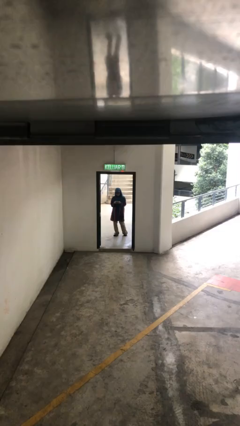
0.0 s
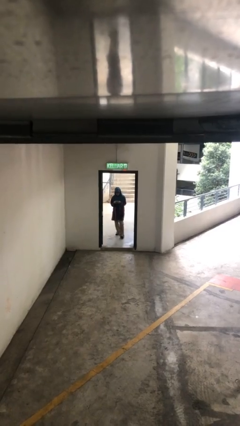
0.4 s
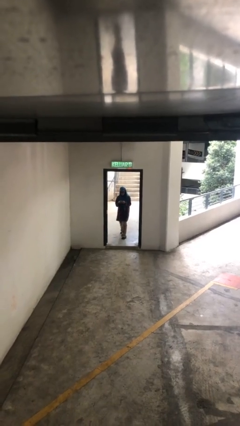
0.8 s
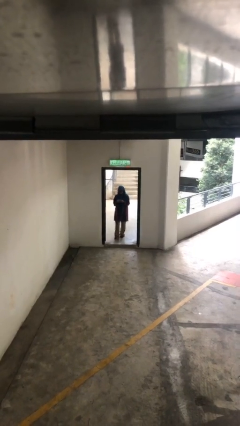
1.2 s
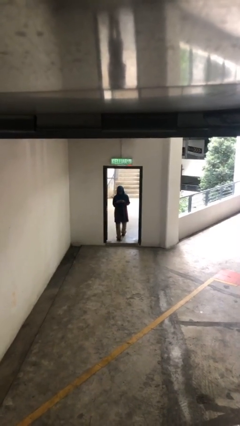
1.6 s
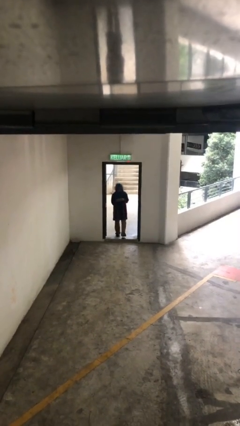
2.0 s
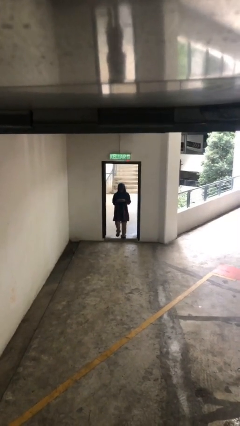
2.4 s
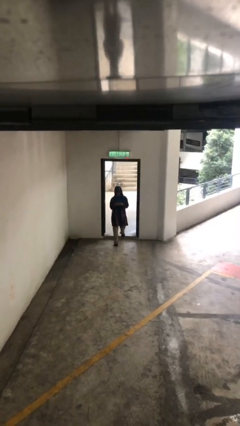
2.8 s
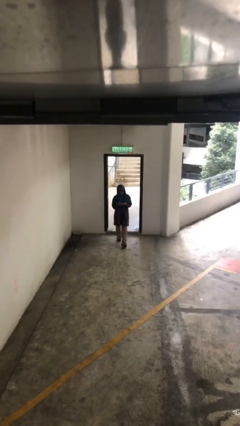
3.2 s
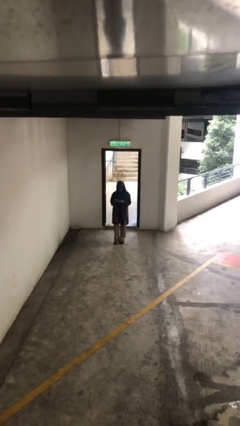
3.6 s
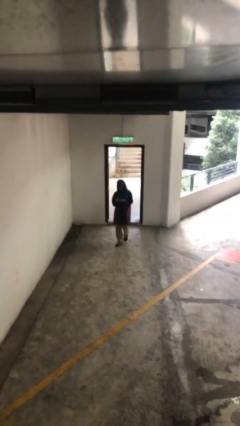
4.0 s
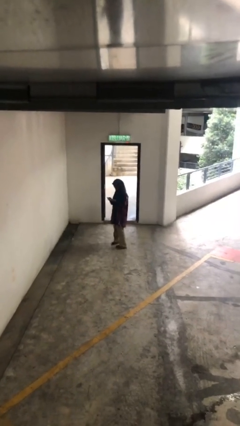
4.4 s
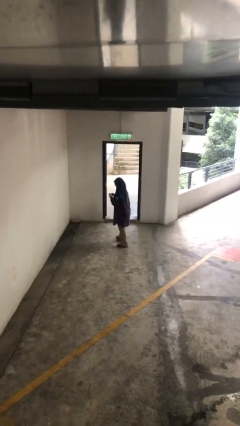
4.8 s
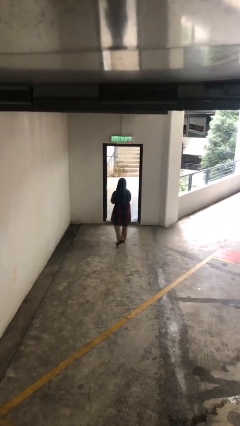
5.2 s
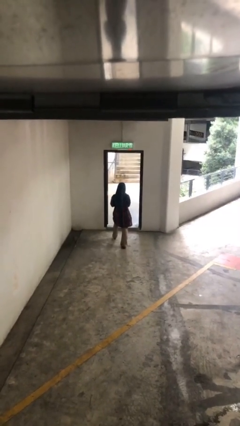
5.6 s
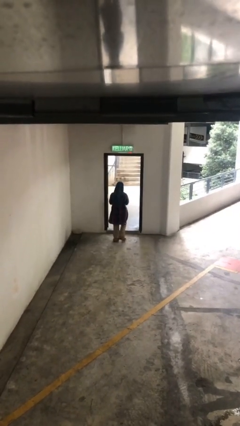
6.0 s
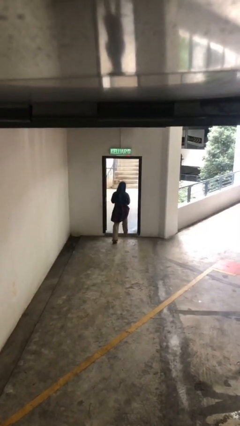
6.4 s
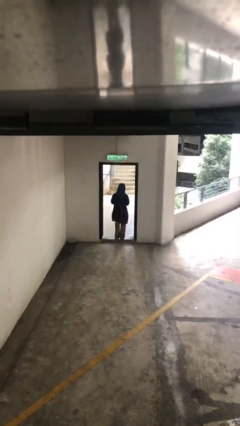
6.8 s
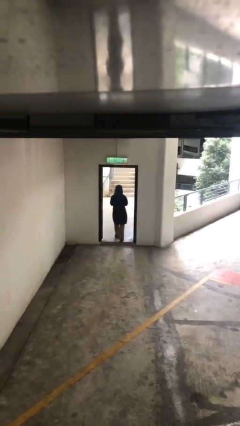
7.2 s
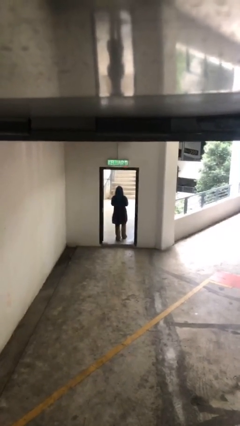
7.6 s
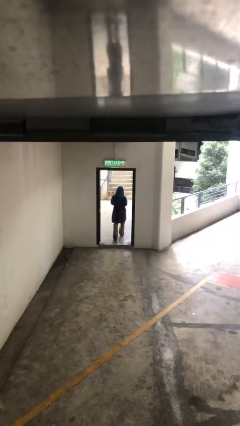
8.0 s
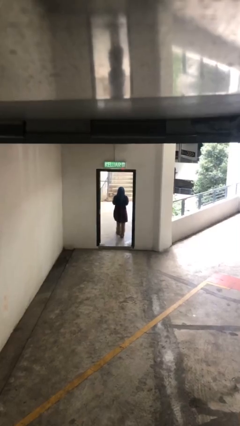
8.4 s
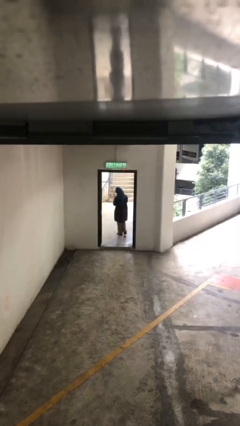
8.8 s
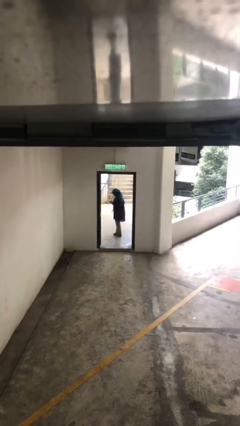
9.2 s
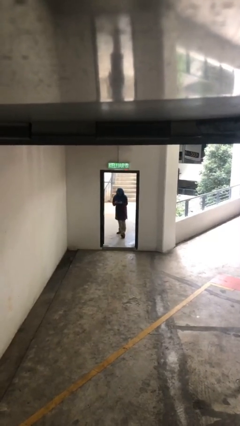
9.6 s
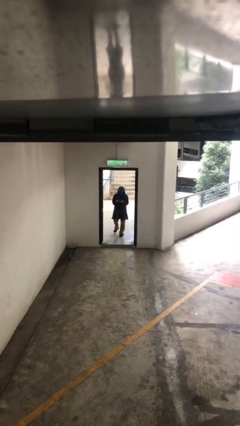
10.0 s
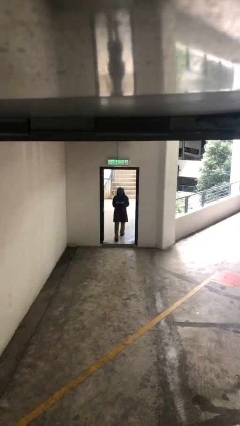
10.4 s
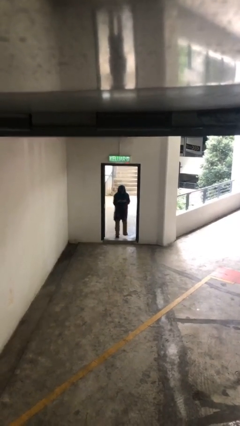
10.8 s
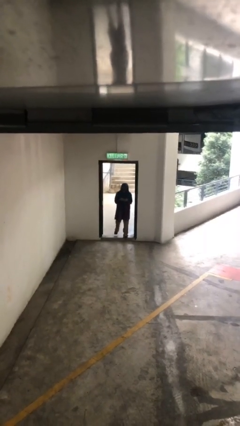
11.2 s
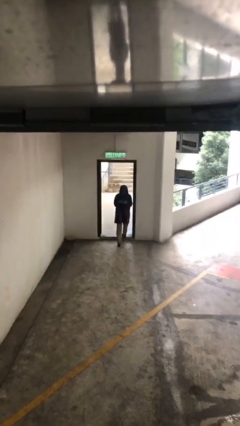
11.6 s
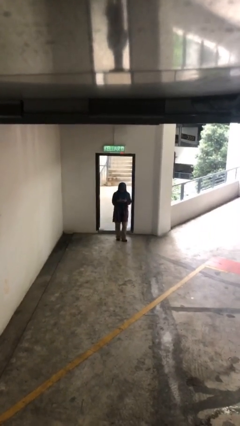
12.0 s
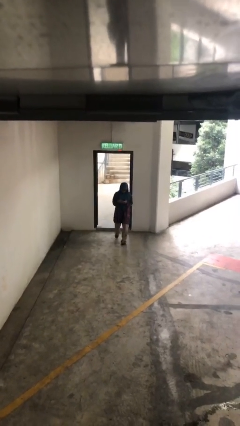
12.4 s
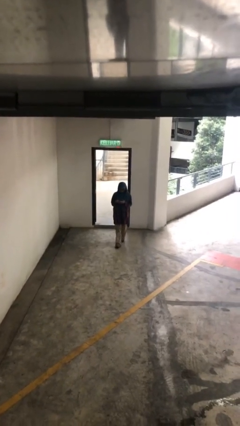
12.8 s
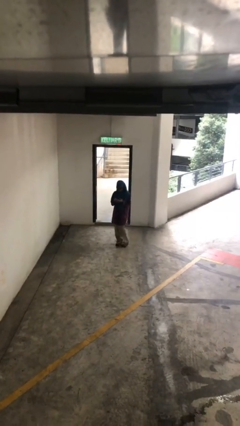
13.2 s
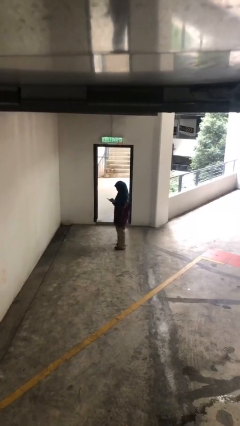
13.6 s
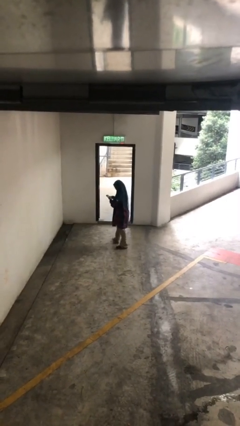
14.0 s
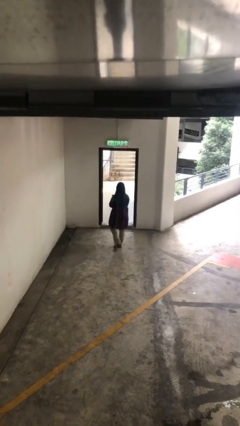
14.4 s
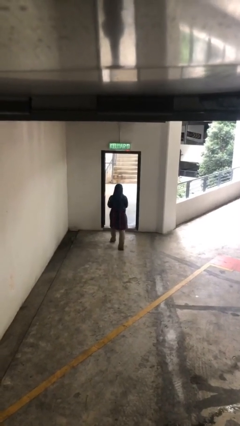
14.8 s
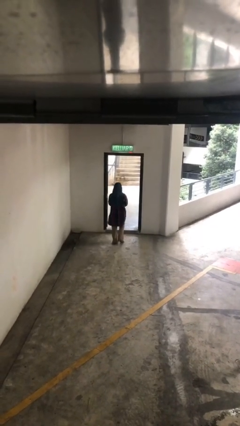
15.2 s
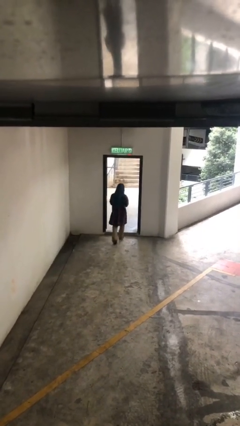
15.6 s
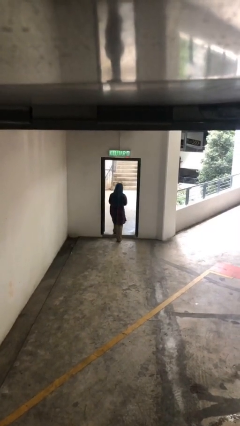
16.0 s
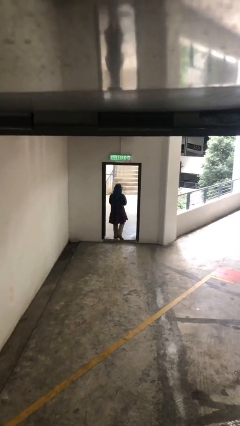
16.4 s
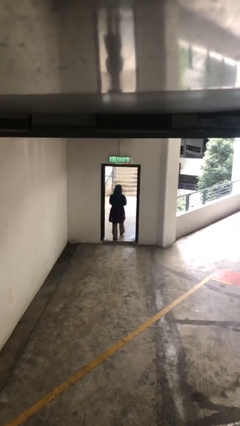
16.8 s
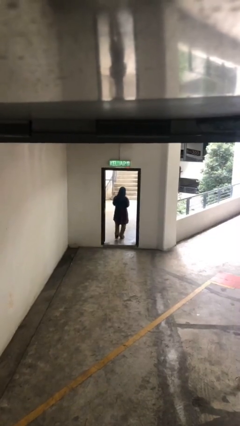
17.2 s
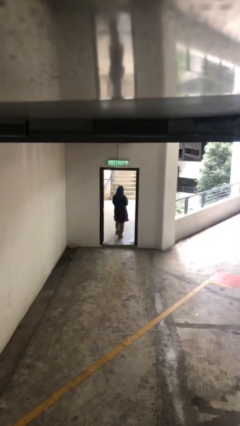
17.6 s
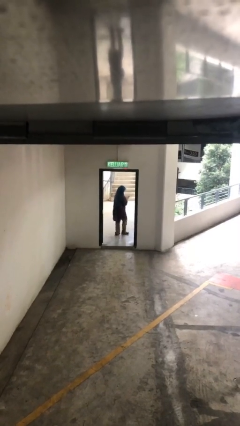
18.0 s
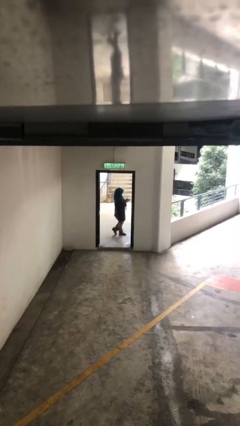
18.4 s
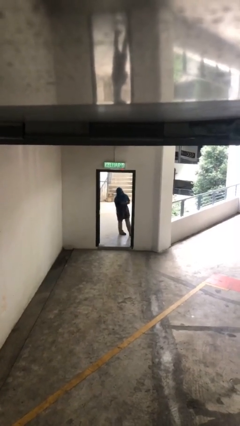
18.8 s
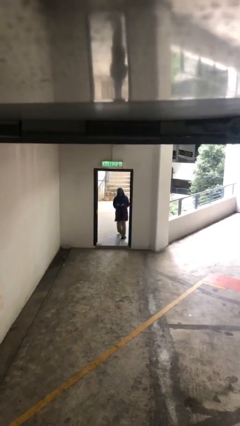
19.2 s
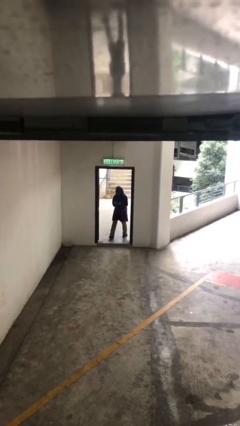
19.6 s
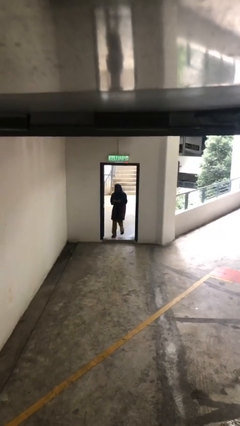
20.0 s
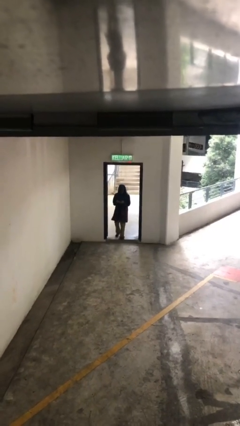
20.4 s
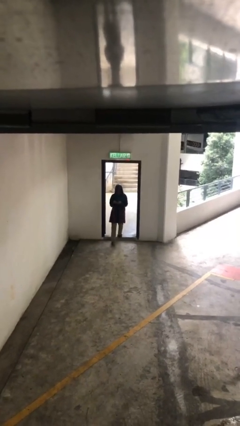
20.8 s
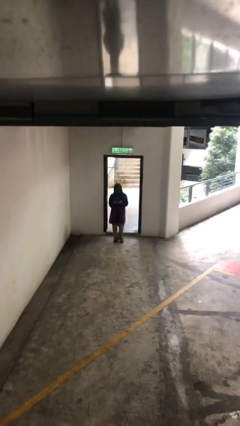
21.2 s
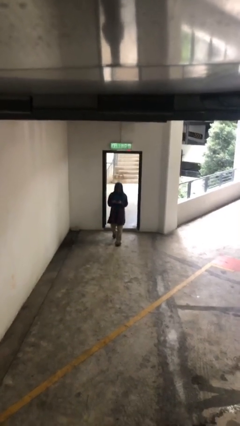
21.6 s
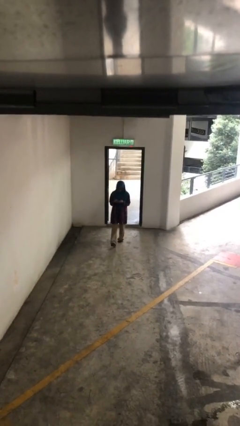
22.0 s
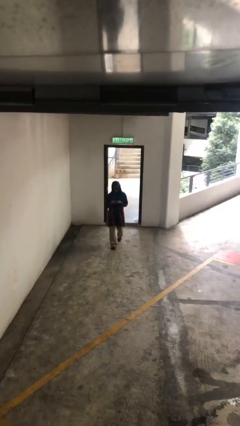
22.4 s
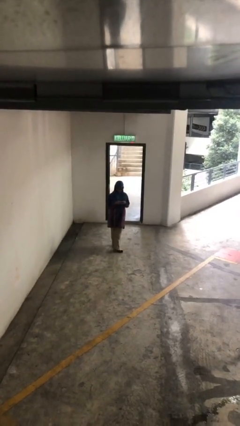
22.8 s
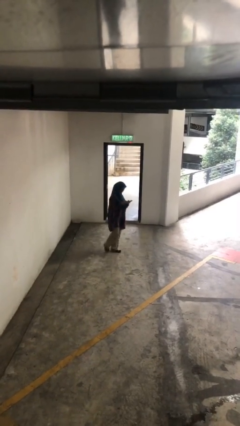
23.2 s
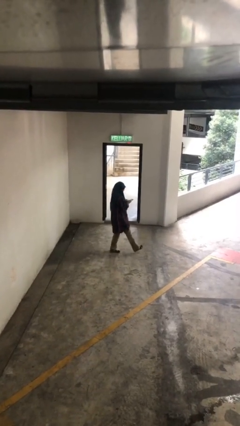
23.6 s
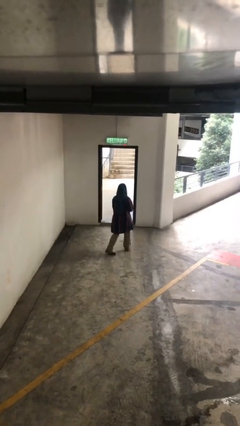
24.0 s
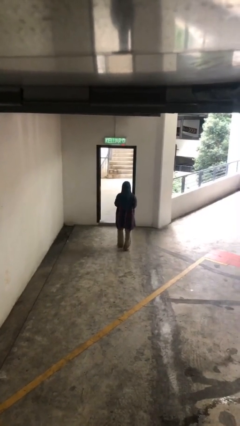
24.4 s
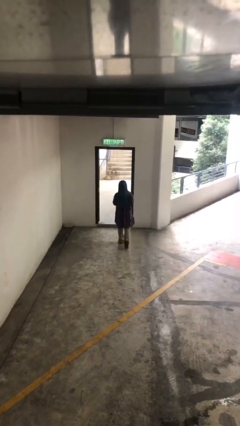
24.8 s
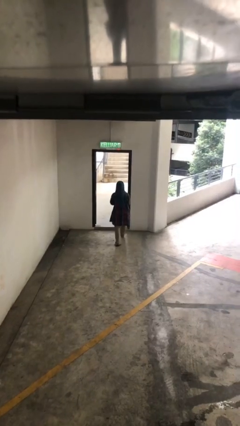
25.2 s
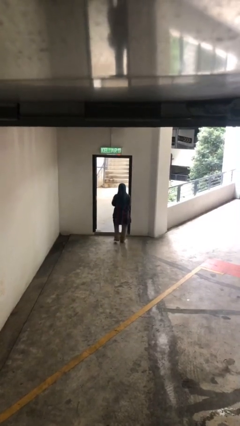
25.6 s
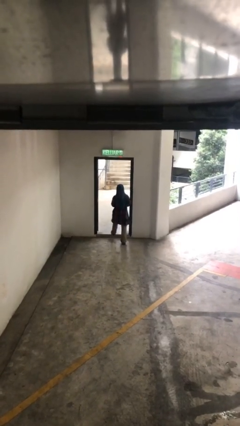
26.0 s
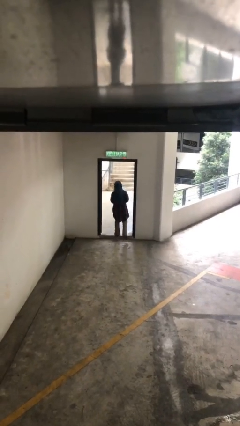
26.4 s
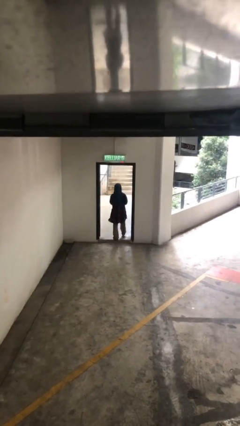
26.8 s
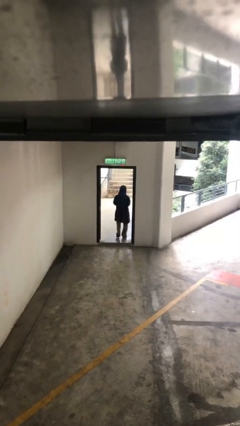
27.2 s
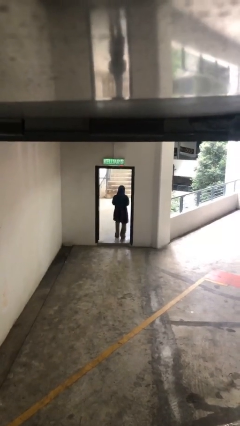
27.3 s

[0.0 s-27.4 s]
person texts on phone

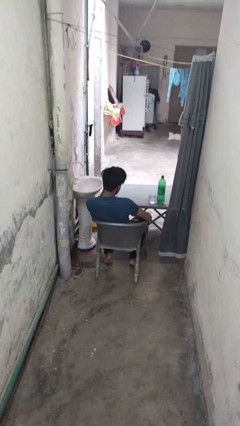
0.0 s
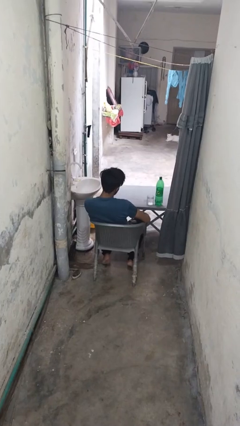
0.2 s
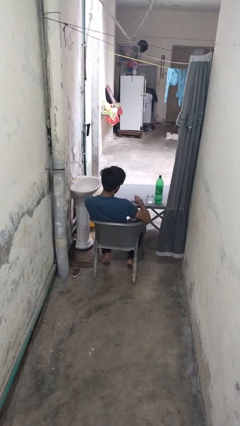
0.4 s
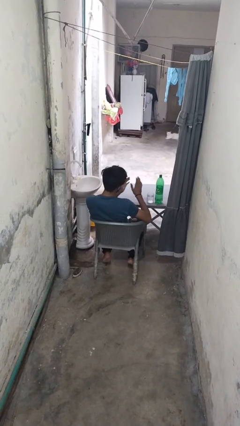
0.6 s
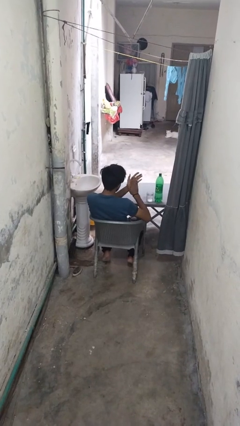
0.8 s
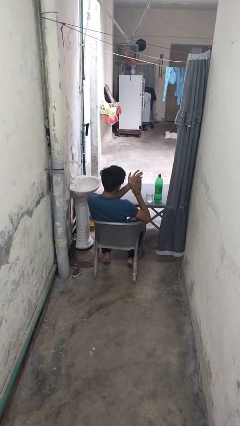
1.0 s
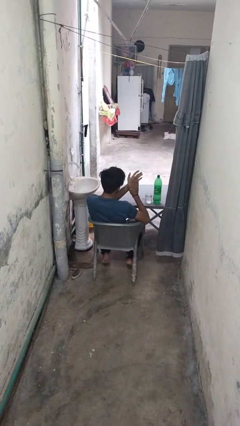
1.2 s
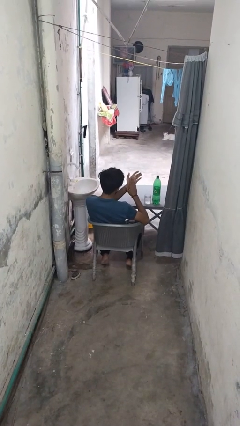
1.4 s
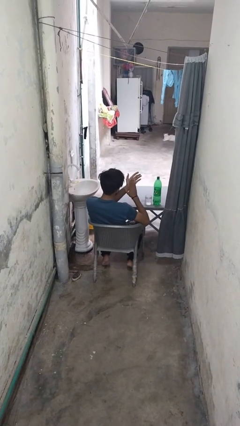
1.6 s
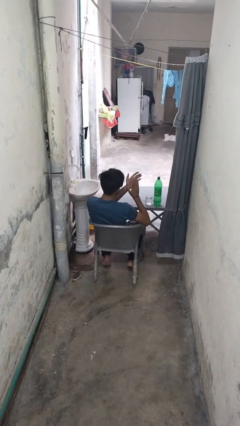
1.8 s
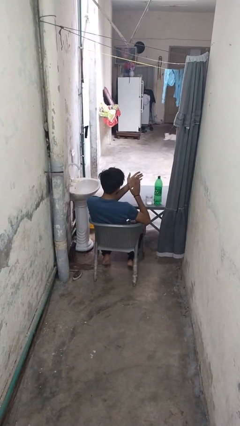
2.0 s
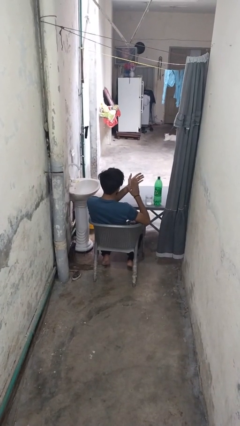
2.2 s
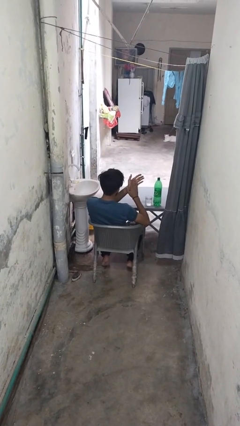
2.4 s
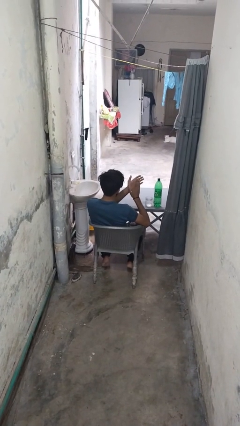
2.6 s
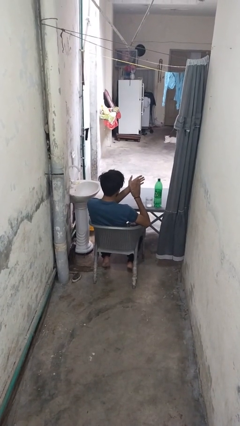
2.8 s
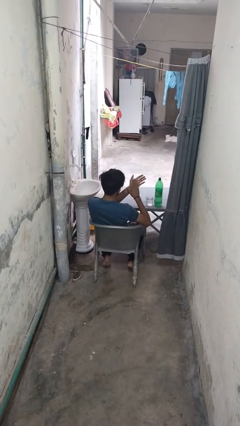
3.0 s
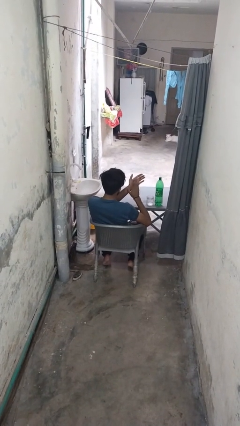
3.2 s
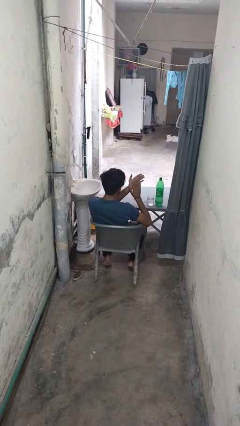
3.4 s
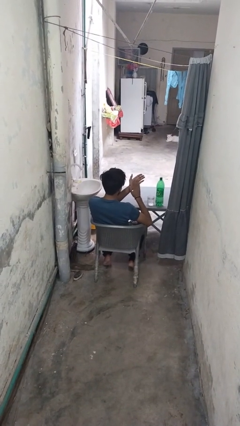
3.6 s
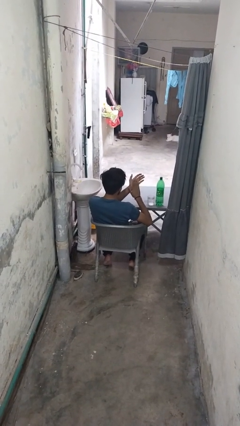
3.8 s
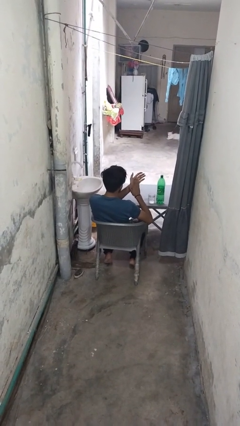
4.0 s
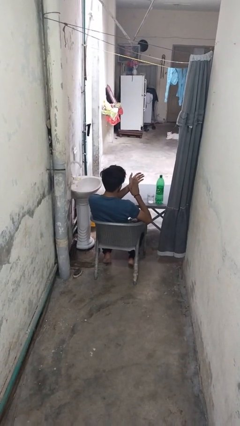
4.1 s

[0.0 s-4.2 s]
person claps hands
